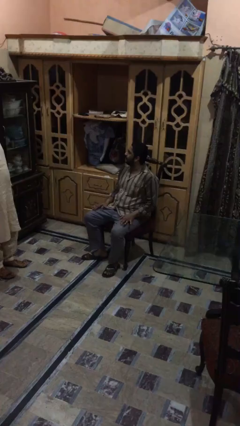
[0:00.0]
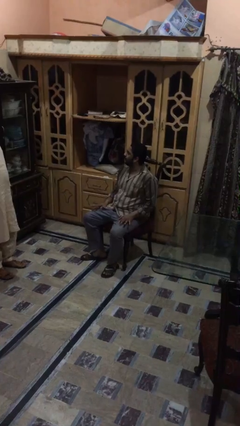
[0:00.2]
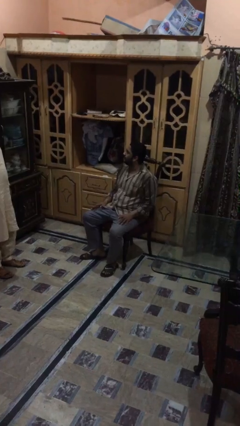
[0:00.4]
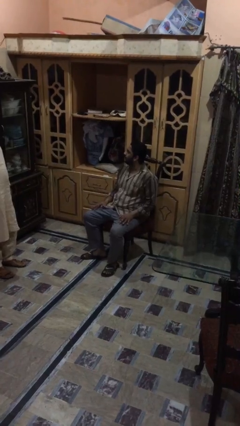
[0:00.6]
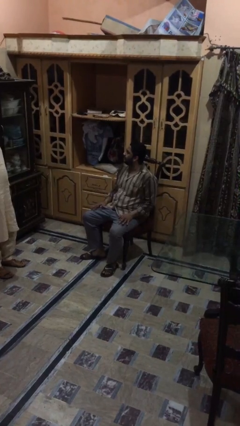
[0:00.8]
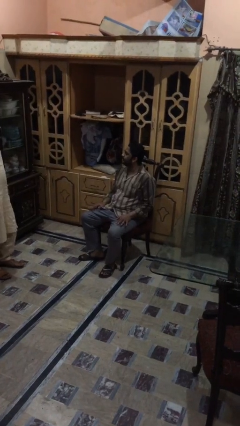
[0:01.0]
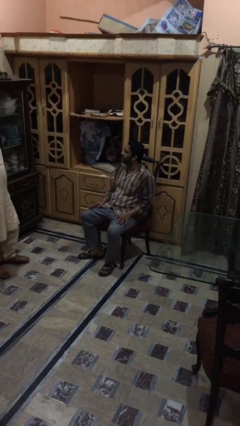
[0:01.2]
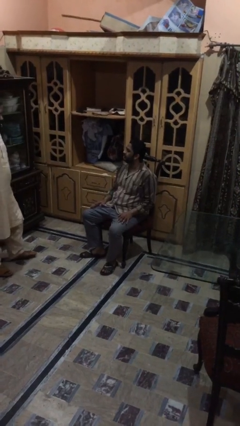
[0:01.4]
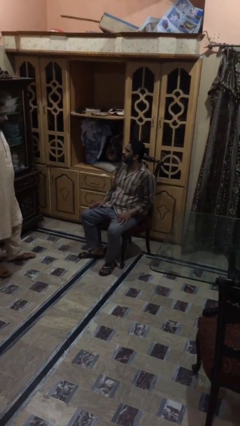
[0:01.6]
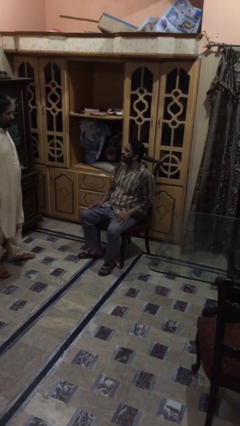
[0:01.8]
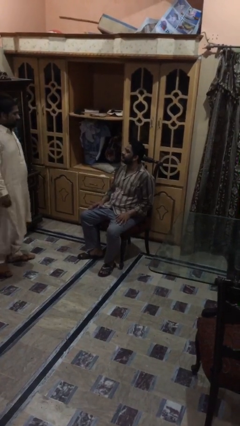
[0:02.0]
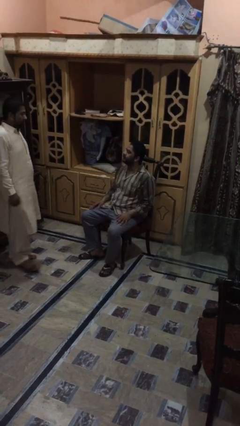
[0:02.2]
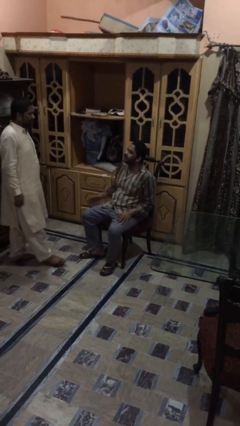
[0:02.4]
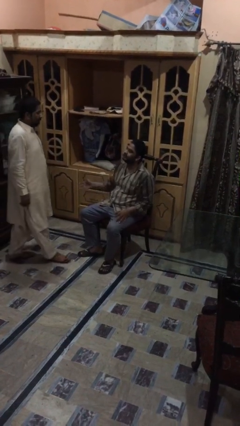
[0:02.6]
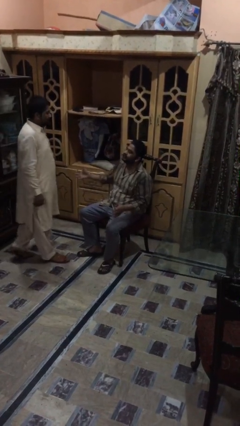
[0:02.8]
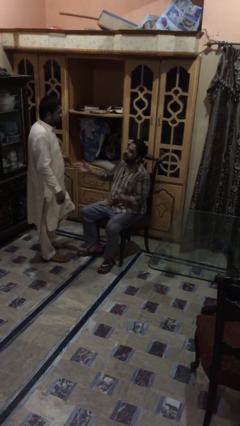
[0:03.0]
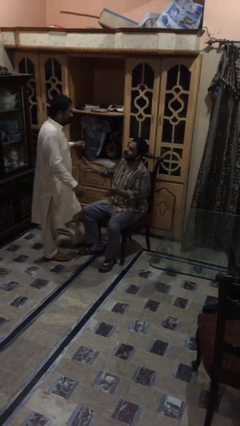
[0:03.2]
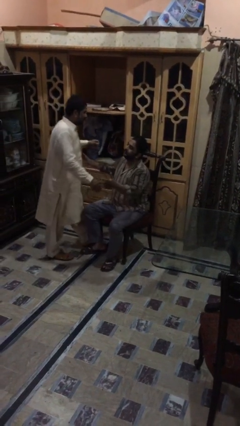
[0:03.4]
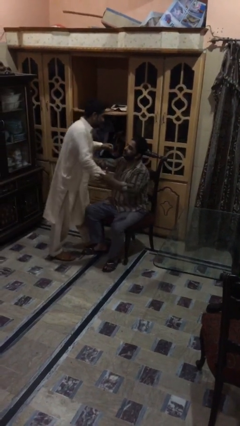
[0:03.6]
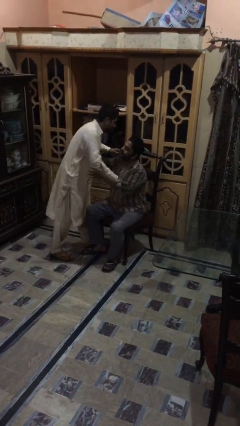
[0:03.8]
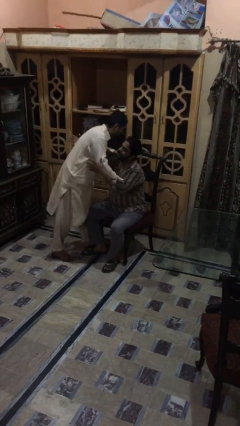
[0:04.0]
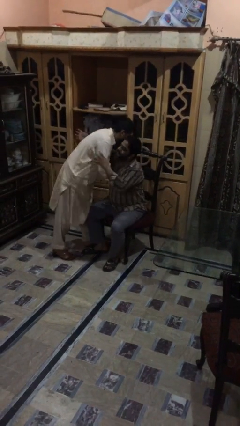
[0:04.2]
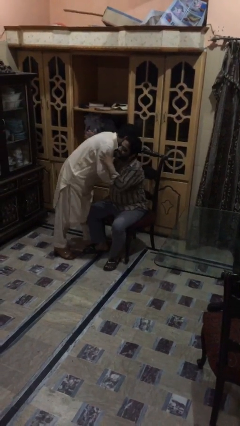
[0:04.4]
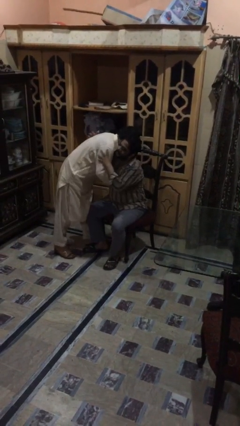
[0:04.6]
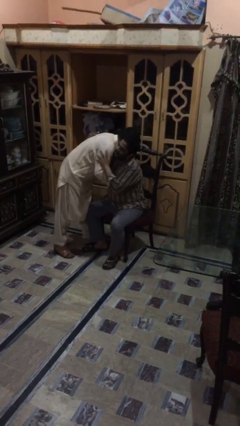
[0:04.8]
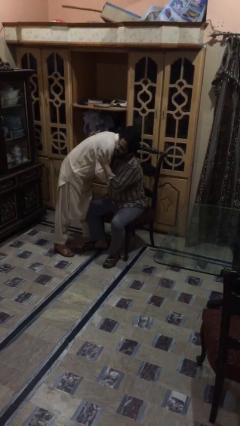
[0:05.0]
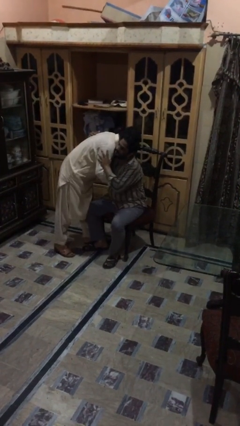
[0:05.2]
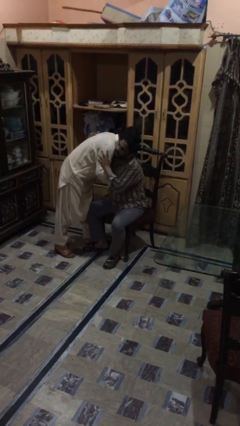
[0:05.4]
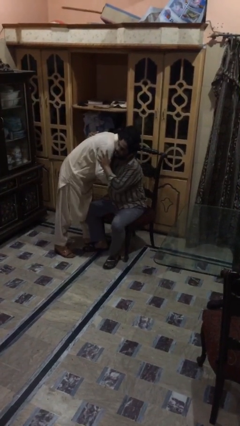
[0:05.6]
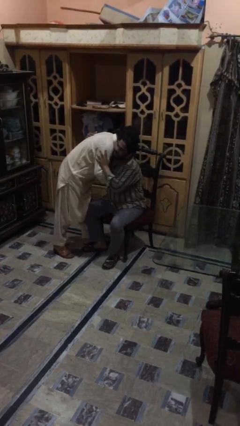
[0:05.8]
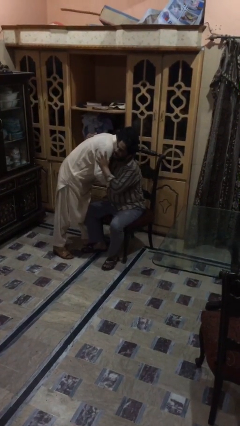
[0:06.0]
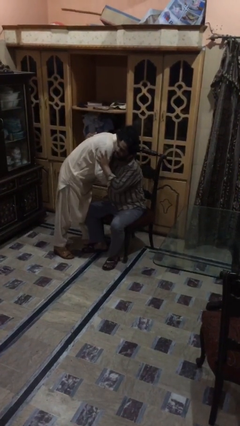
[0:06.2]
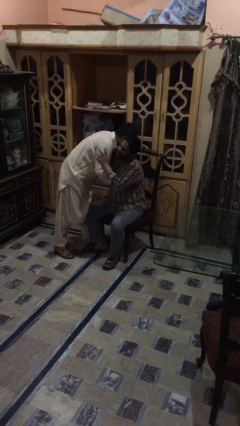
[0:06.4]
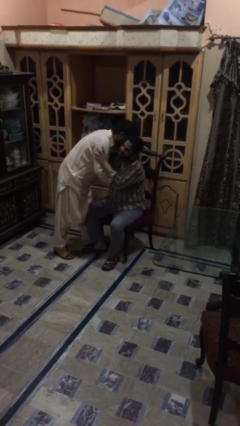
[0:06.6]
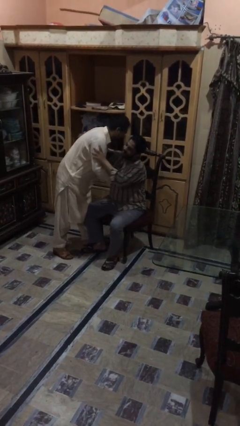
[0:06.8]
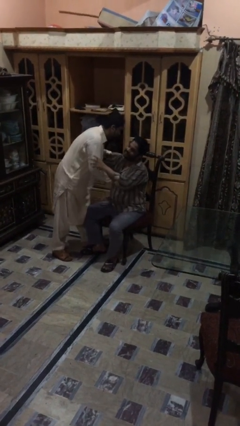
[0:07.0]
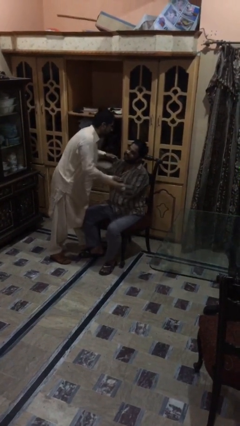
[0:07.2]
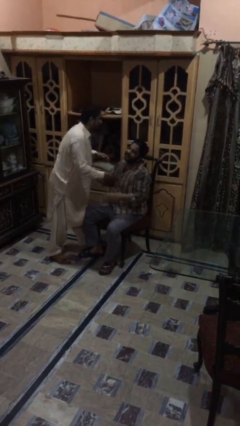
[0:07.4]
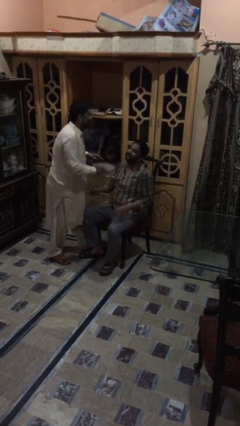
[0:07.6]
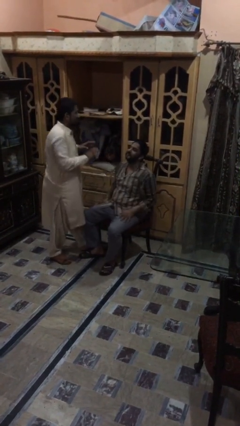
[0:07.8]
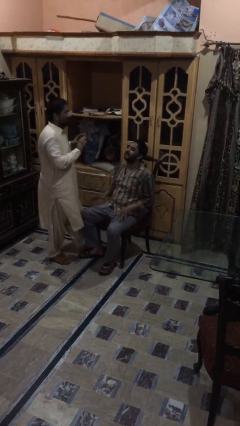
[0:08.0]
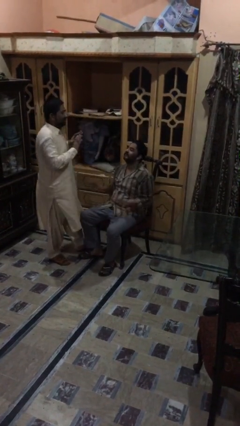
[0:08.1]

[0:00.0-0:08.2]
person embraces person

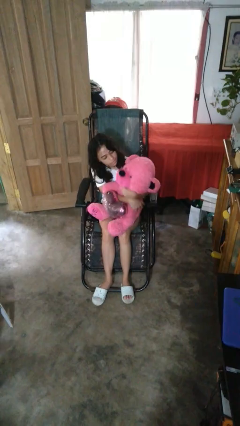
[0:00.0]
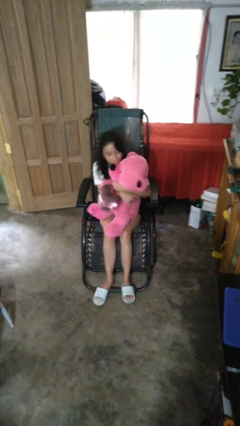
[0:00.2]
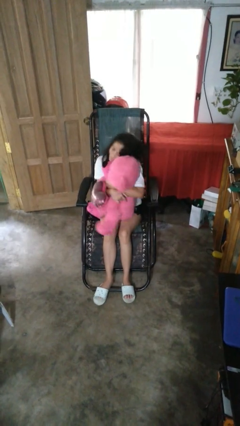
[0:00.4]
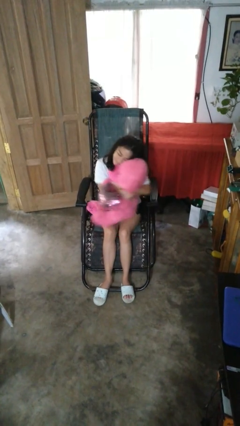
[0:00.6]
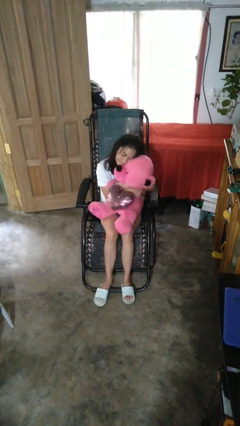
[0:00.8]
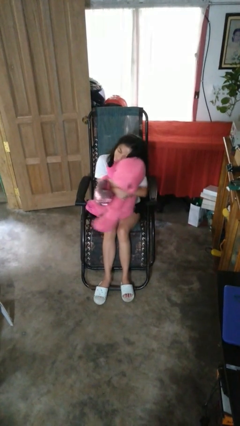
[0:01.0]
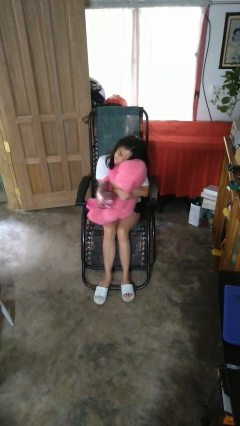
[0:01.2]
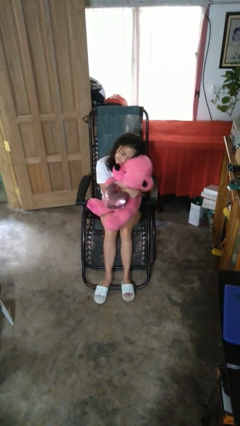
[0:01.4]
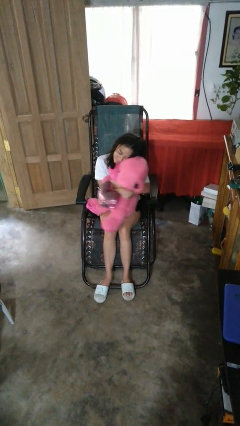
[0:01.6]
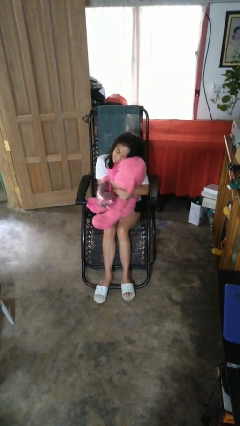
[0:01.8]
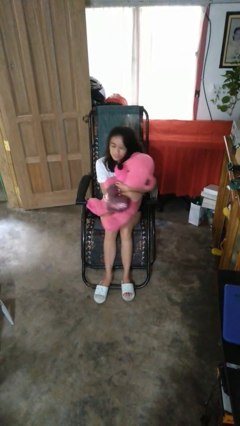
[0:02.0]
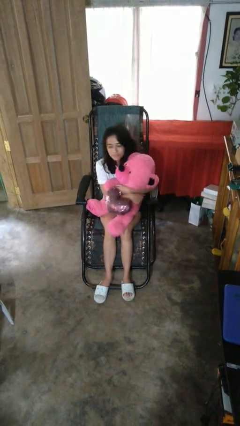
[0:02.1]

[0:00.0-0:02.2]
person hugs stuffed animal

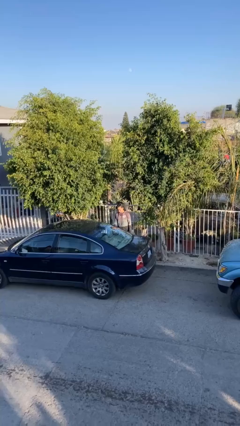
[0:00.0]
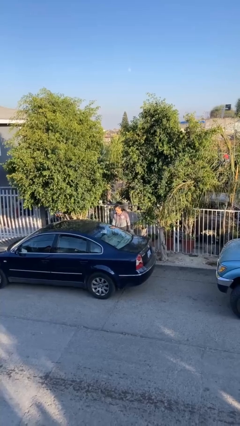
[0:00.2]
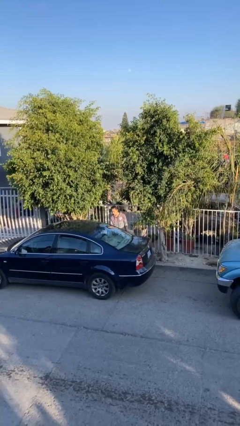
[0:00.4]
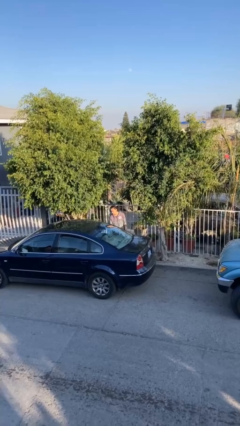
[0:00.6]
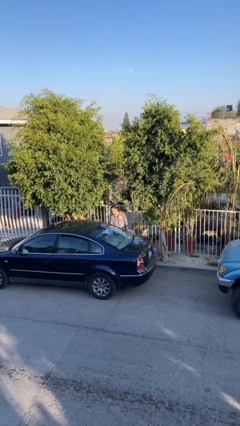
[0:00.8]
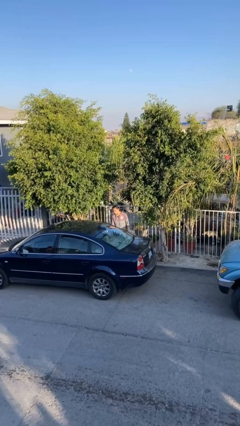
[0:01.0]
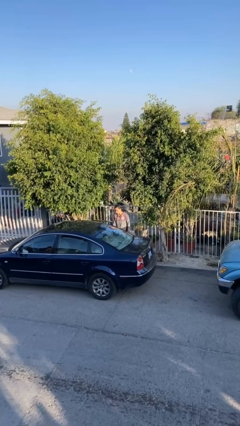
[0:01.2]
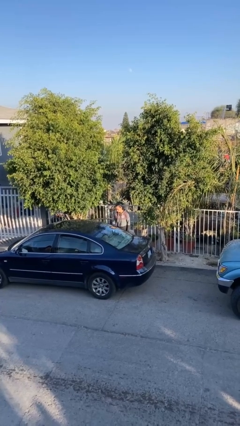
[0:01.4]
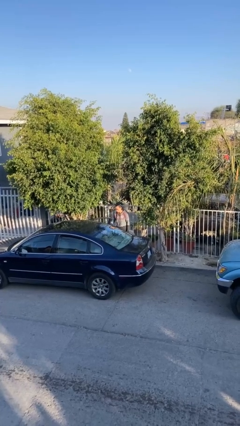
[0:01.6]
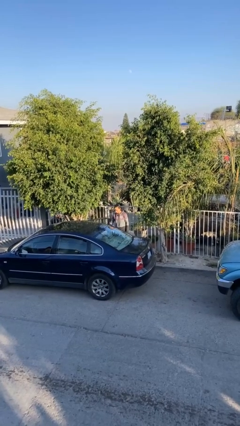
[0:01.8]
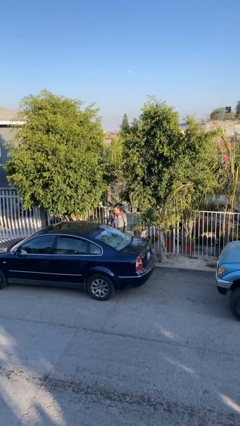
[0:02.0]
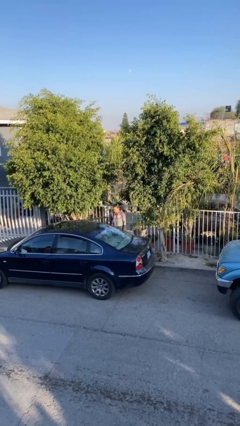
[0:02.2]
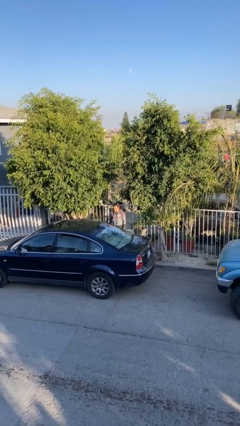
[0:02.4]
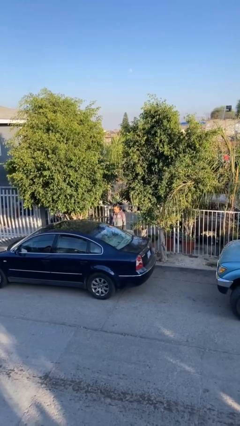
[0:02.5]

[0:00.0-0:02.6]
person opens car door

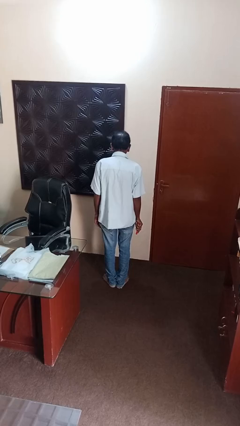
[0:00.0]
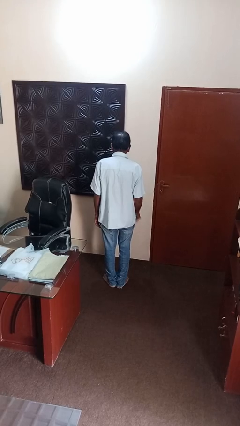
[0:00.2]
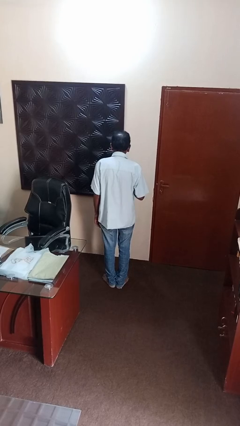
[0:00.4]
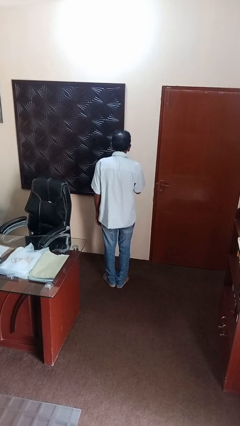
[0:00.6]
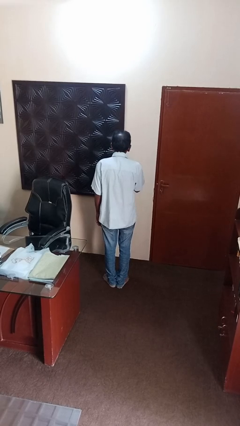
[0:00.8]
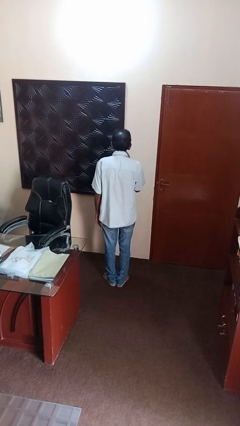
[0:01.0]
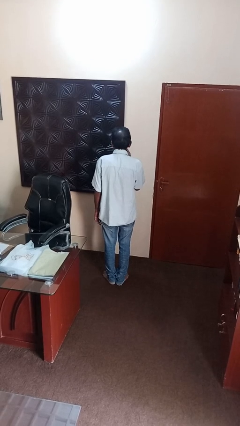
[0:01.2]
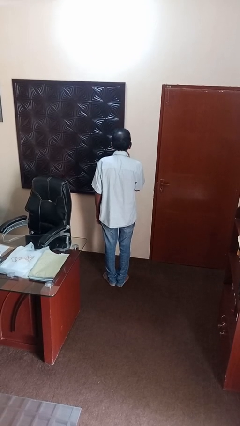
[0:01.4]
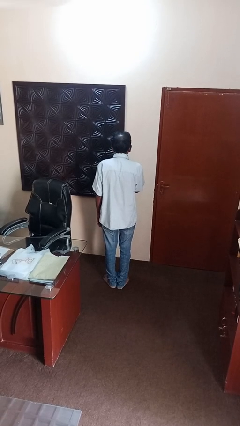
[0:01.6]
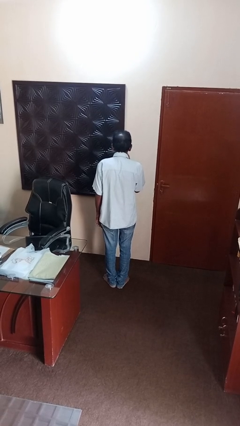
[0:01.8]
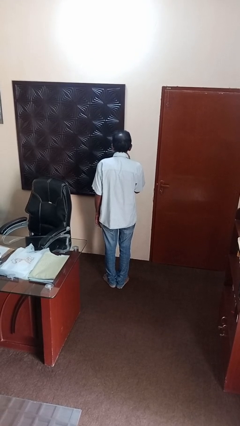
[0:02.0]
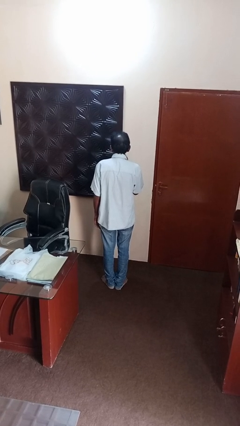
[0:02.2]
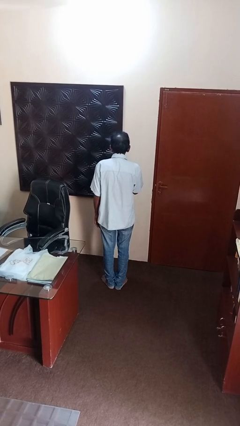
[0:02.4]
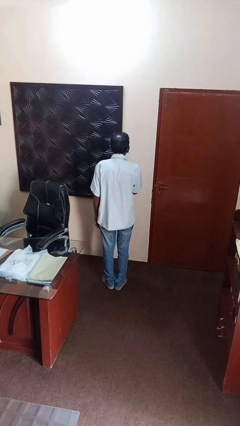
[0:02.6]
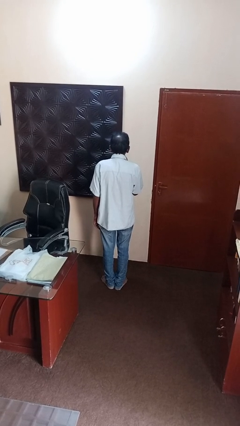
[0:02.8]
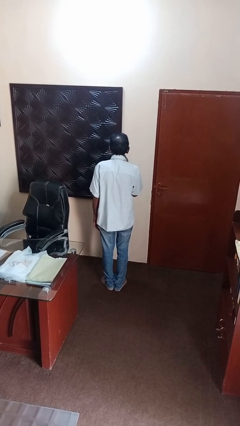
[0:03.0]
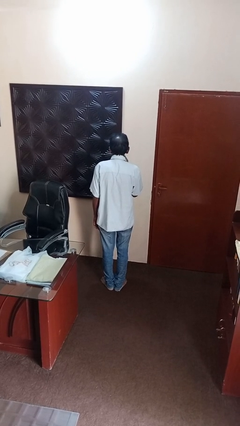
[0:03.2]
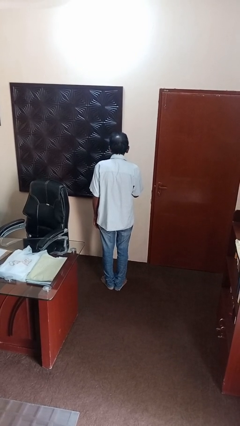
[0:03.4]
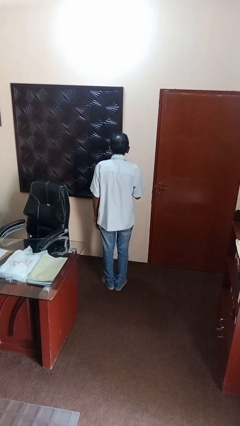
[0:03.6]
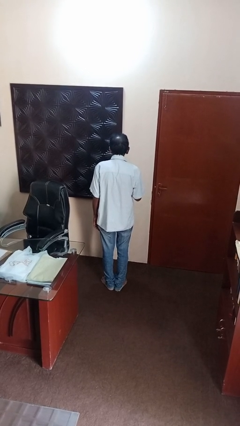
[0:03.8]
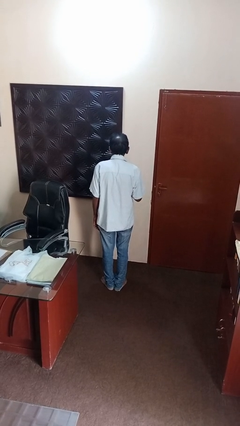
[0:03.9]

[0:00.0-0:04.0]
person applies lip makeup
